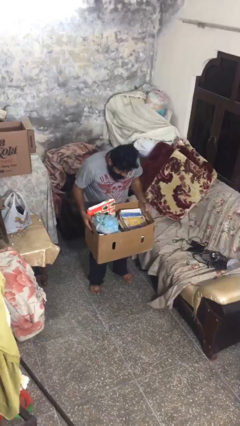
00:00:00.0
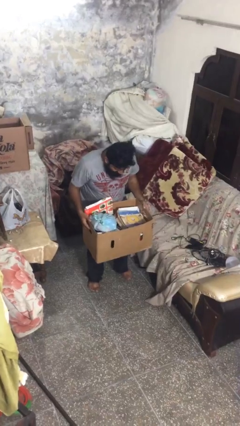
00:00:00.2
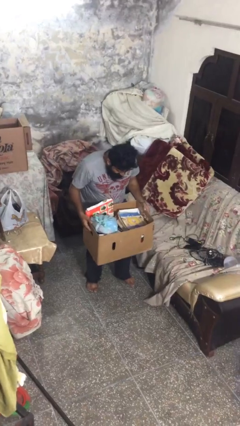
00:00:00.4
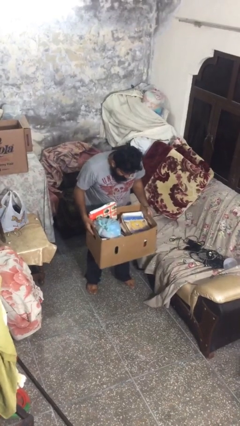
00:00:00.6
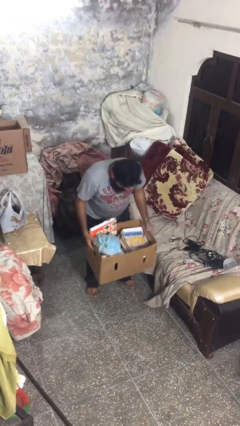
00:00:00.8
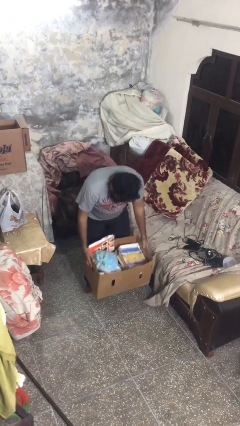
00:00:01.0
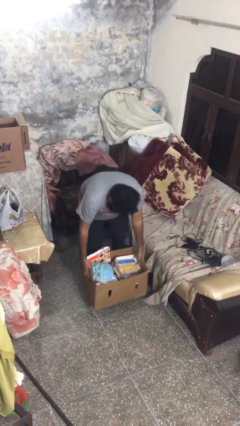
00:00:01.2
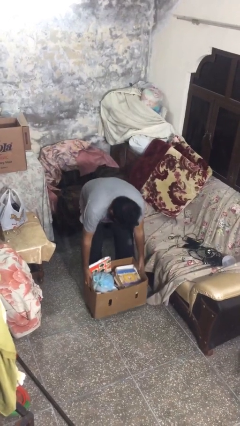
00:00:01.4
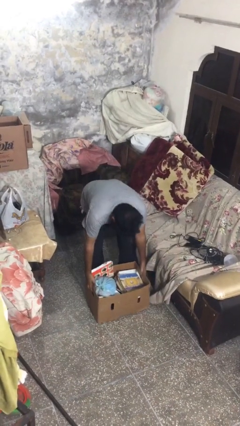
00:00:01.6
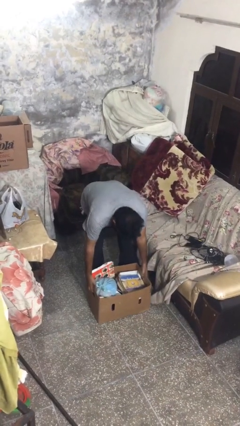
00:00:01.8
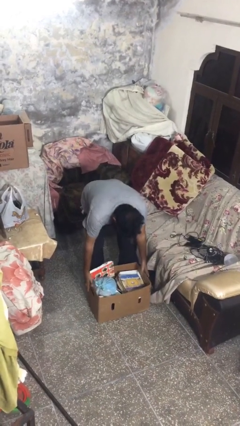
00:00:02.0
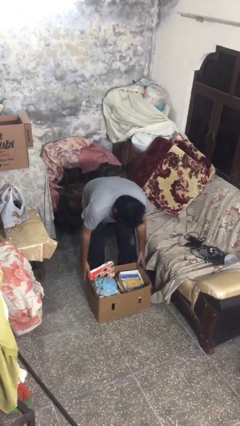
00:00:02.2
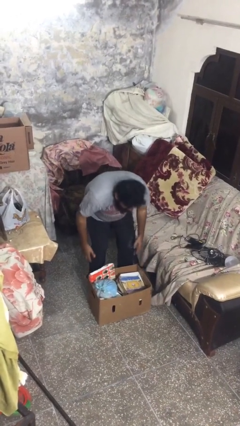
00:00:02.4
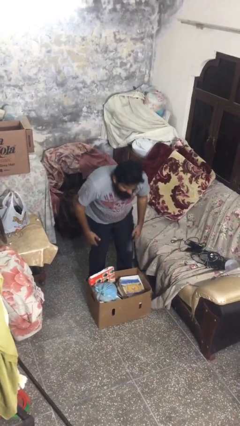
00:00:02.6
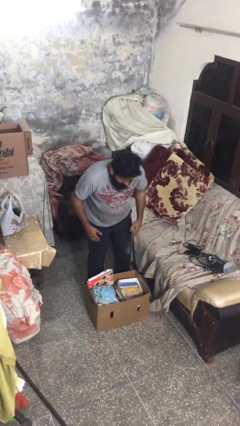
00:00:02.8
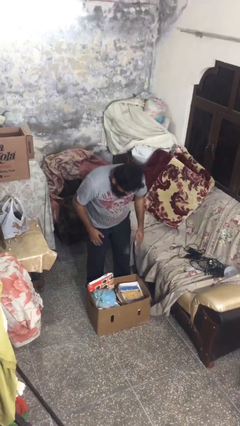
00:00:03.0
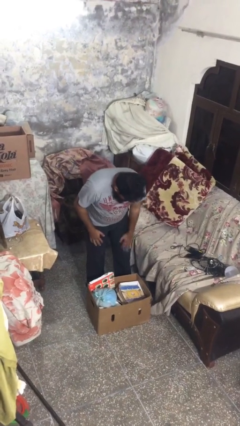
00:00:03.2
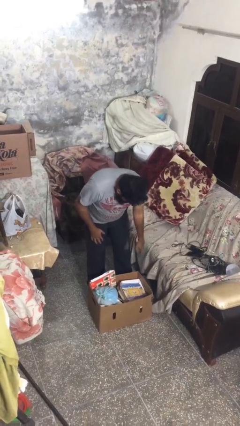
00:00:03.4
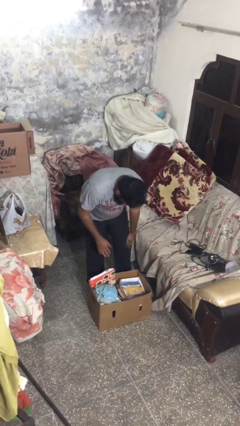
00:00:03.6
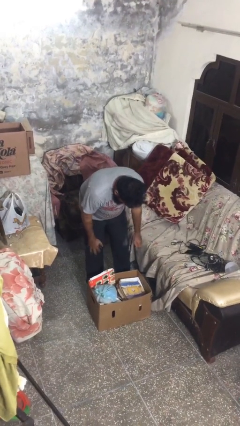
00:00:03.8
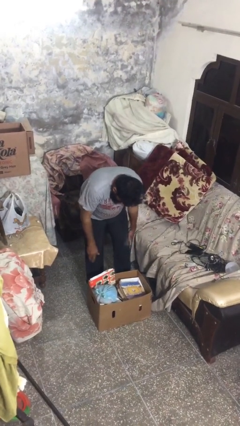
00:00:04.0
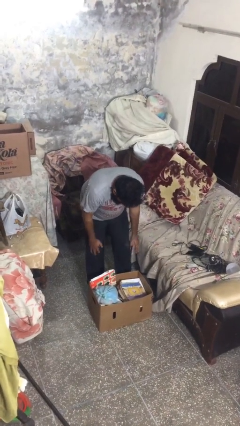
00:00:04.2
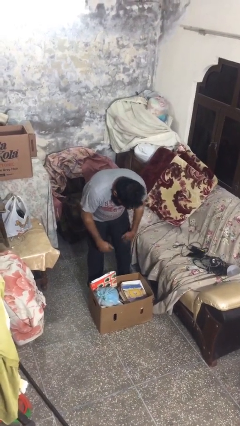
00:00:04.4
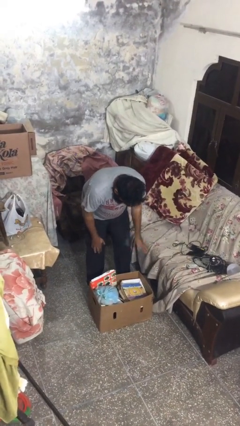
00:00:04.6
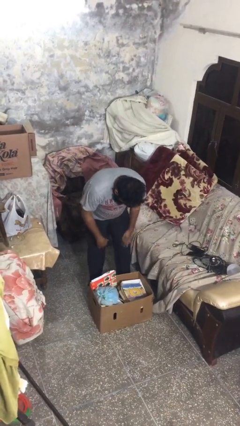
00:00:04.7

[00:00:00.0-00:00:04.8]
person puts down object on floor

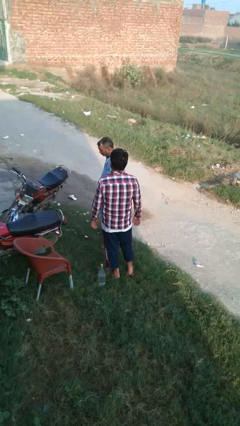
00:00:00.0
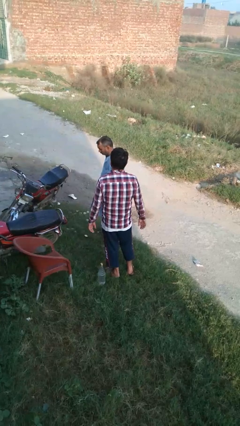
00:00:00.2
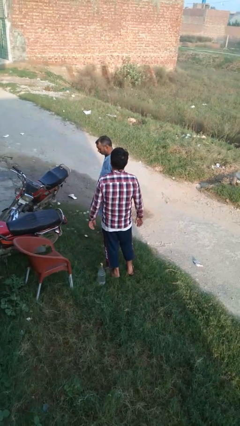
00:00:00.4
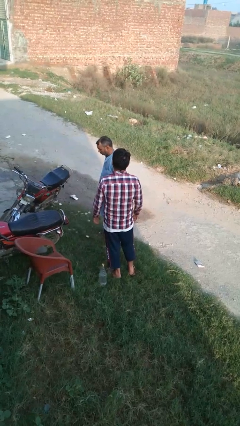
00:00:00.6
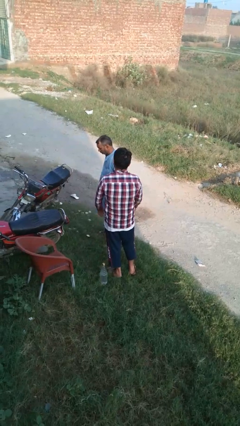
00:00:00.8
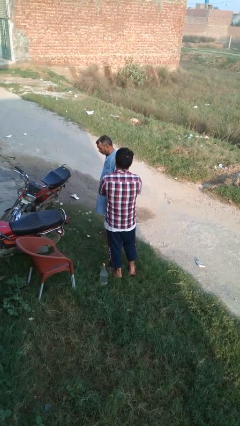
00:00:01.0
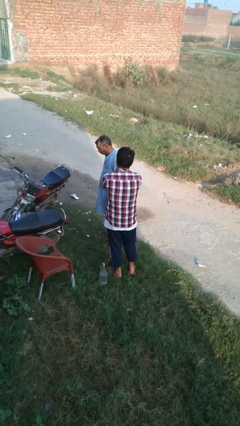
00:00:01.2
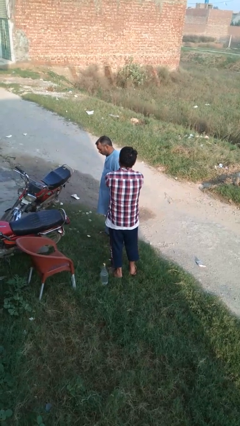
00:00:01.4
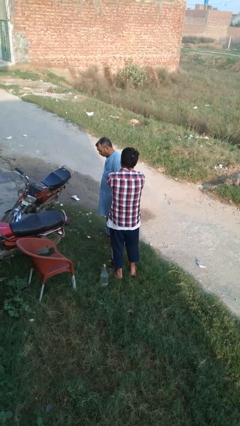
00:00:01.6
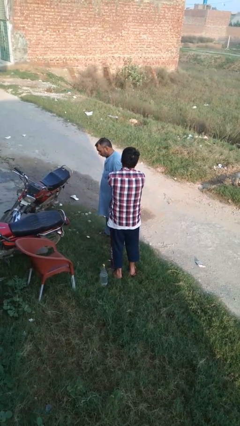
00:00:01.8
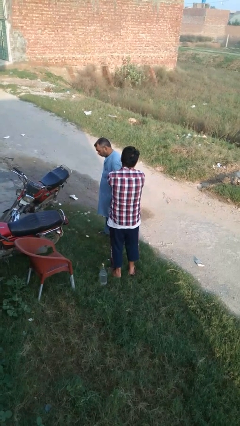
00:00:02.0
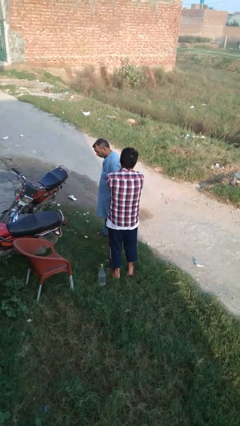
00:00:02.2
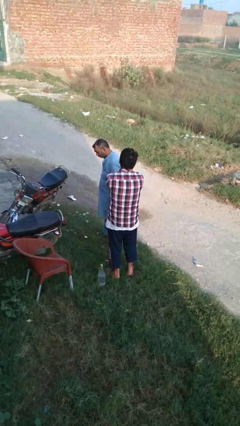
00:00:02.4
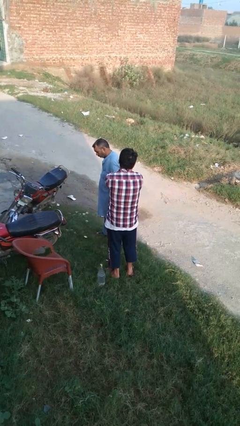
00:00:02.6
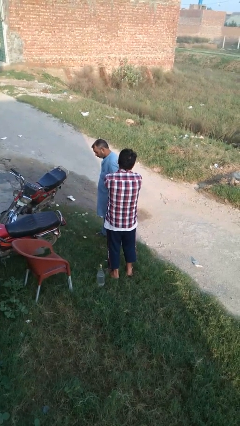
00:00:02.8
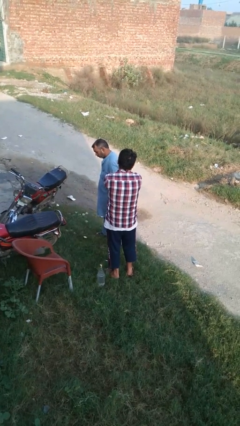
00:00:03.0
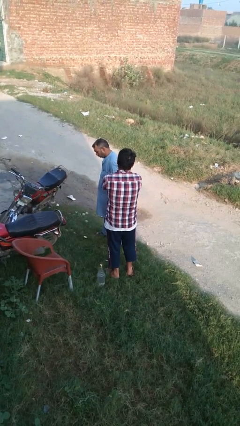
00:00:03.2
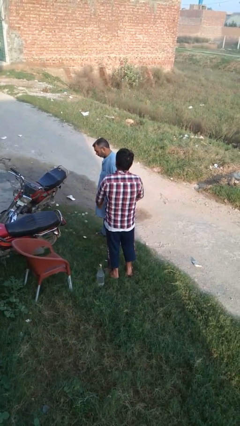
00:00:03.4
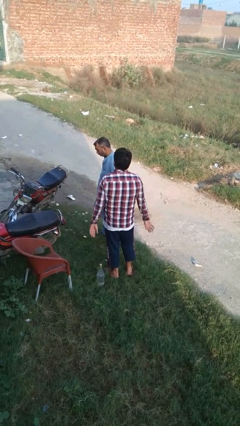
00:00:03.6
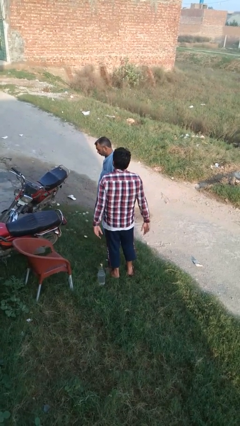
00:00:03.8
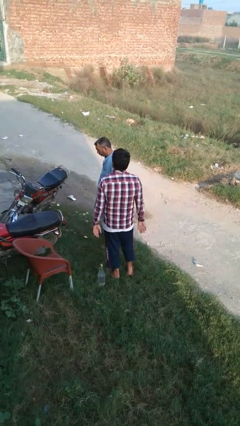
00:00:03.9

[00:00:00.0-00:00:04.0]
person grabs person by forearm

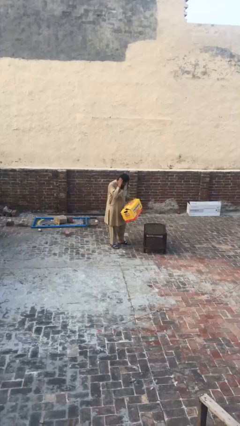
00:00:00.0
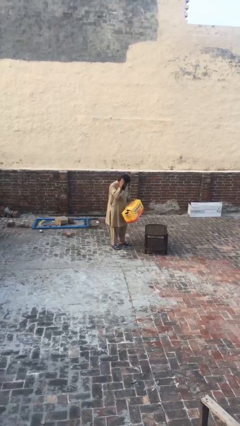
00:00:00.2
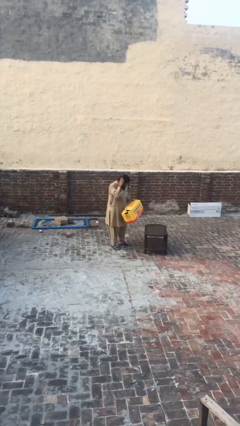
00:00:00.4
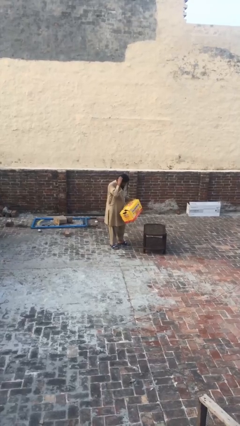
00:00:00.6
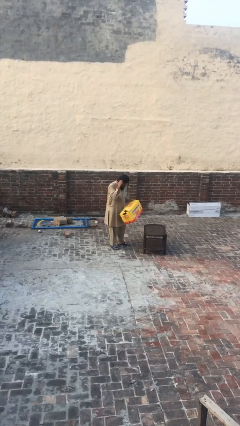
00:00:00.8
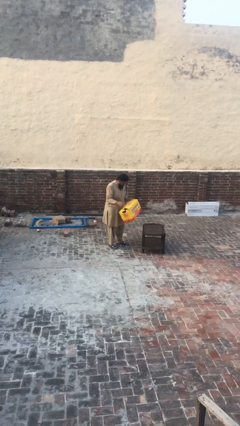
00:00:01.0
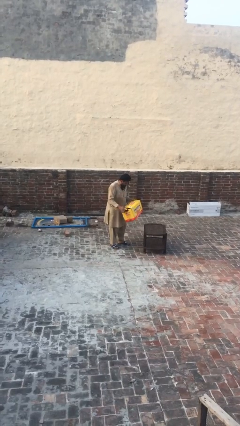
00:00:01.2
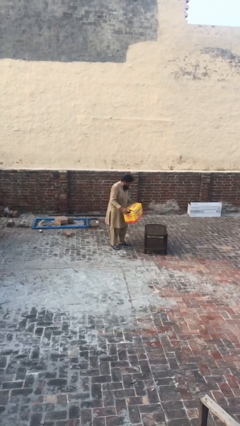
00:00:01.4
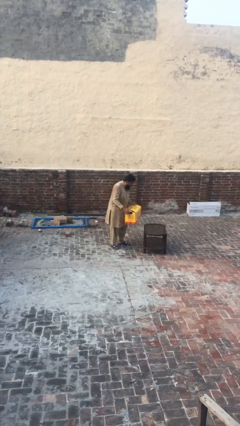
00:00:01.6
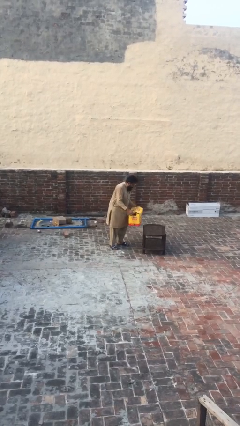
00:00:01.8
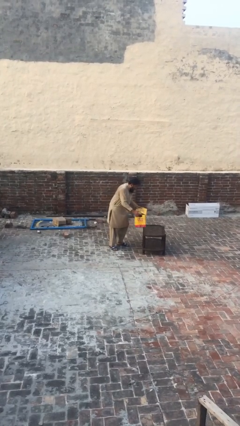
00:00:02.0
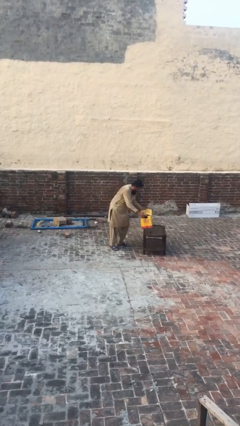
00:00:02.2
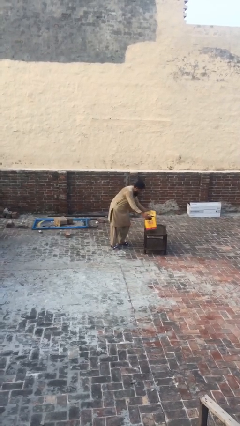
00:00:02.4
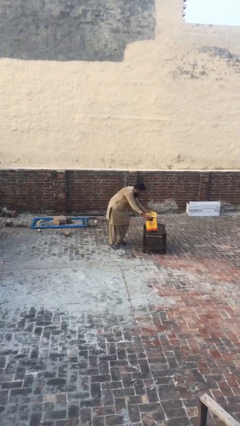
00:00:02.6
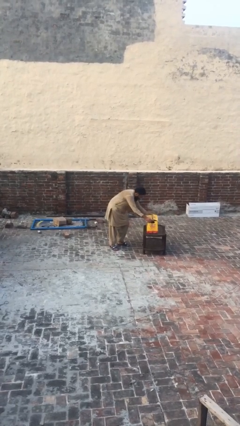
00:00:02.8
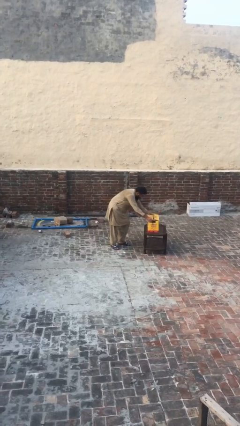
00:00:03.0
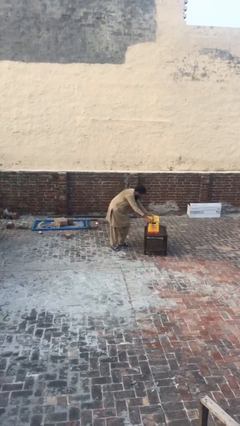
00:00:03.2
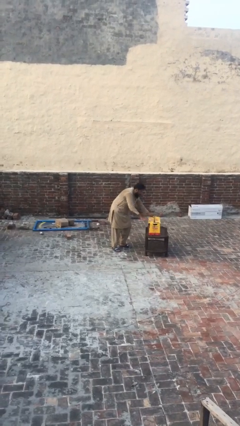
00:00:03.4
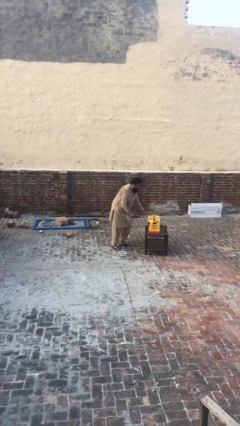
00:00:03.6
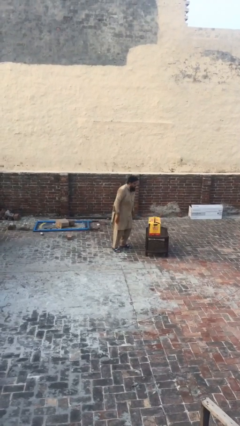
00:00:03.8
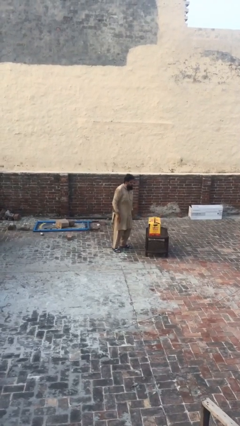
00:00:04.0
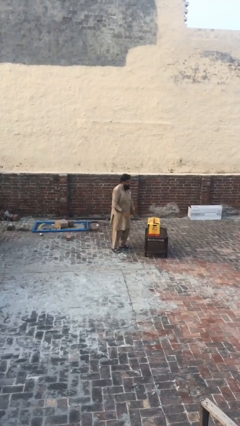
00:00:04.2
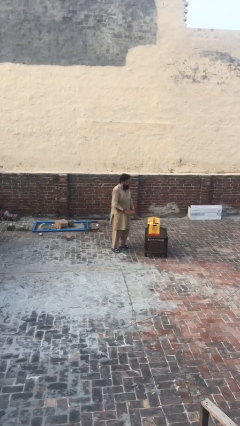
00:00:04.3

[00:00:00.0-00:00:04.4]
person puts down object on table

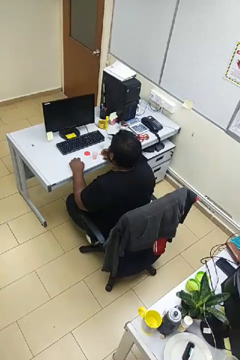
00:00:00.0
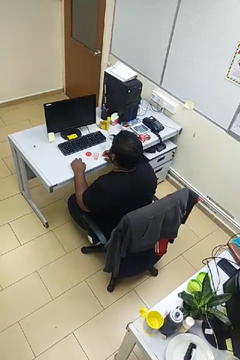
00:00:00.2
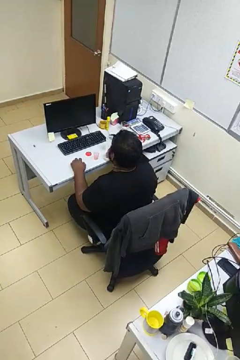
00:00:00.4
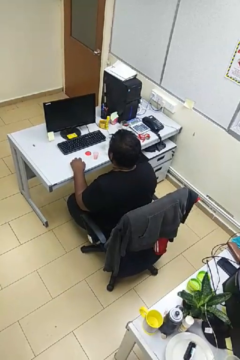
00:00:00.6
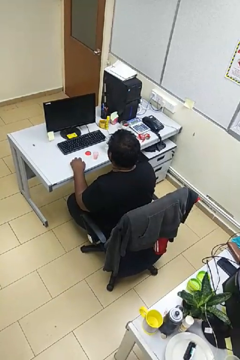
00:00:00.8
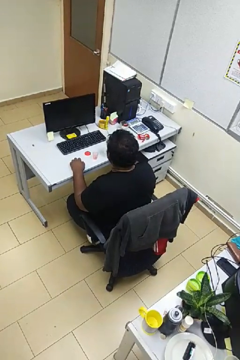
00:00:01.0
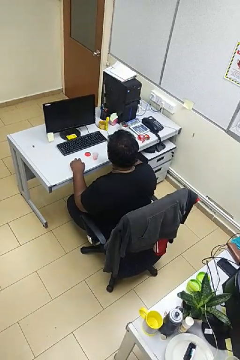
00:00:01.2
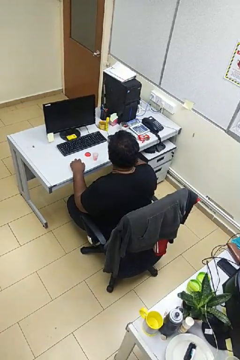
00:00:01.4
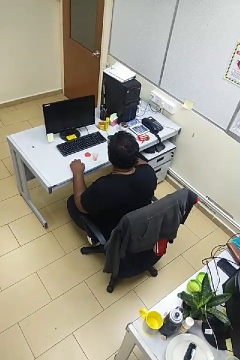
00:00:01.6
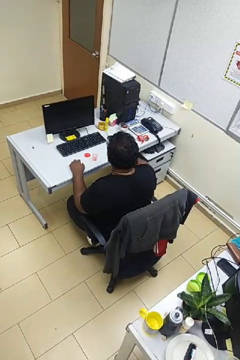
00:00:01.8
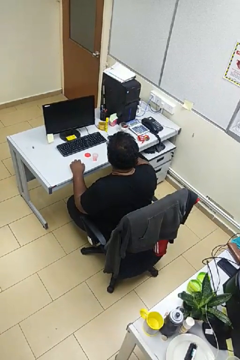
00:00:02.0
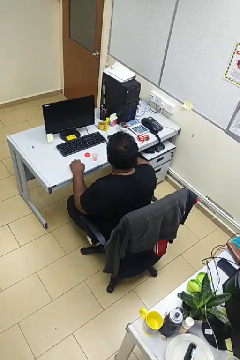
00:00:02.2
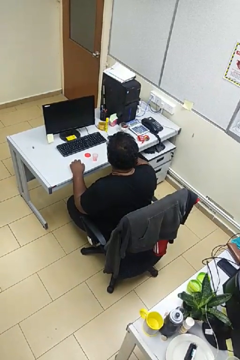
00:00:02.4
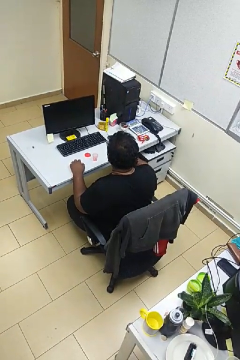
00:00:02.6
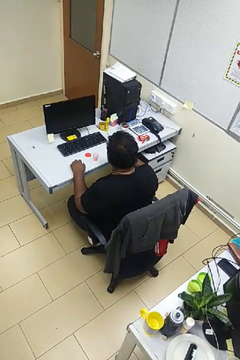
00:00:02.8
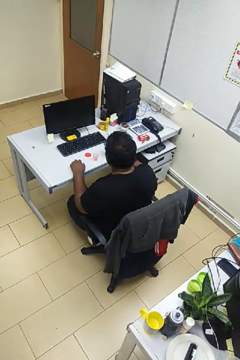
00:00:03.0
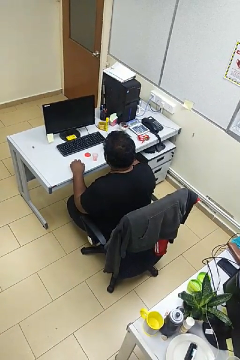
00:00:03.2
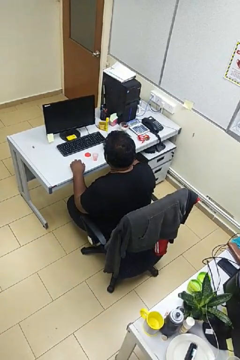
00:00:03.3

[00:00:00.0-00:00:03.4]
person drinks from cup

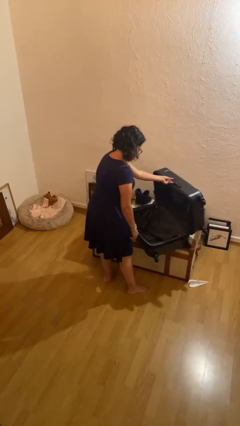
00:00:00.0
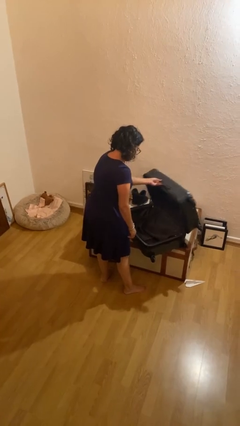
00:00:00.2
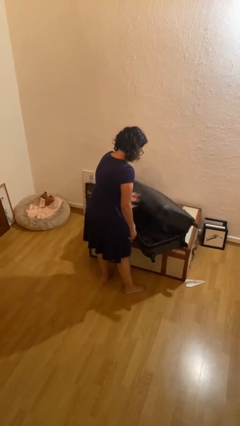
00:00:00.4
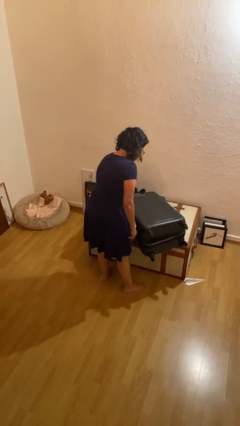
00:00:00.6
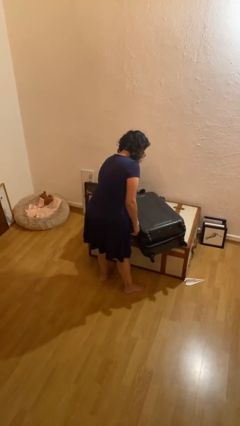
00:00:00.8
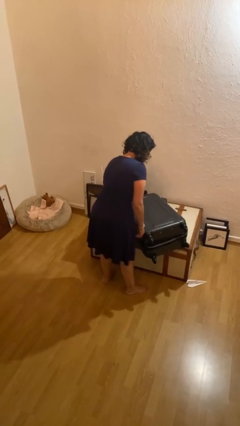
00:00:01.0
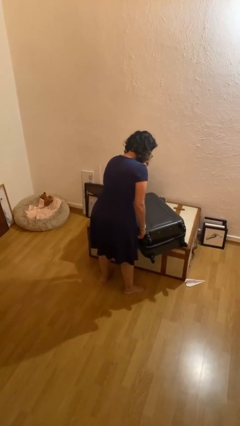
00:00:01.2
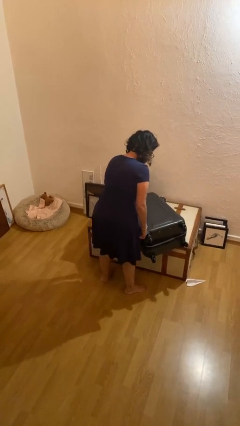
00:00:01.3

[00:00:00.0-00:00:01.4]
person closes suitcase

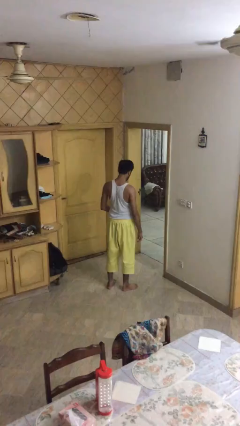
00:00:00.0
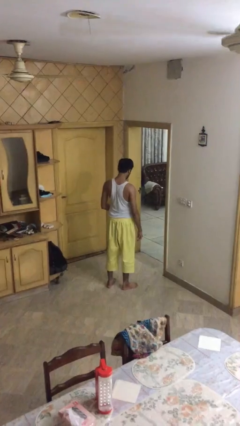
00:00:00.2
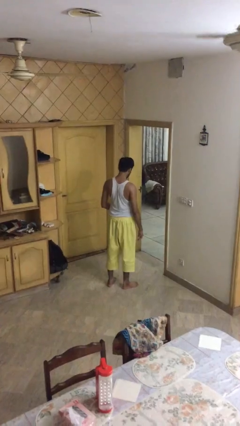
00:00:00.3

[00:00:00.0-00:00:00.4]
person exits scene through structure
